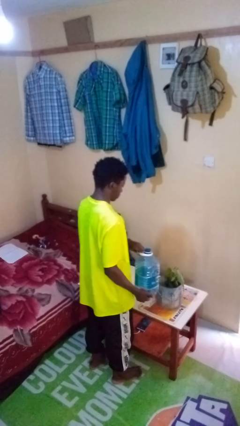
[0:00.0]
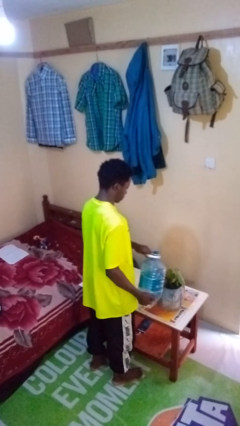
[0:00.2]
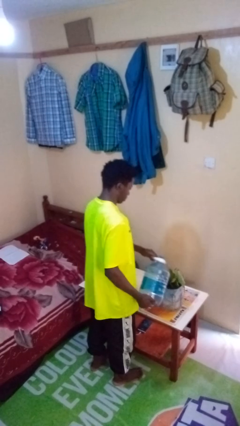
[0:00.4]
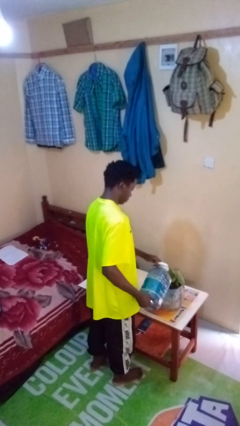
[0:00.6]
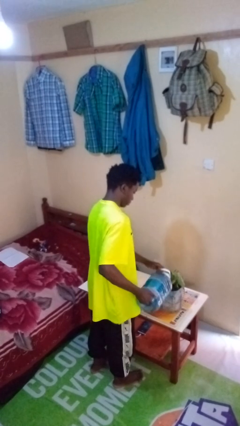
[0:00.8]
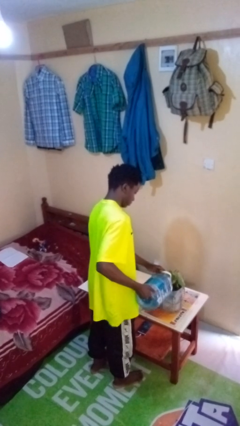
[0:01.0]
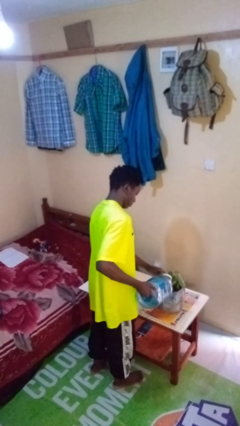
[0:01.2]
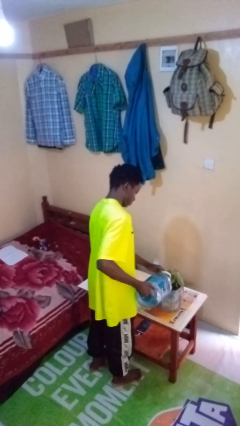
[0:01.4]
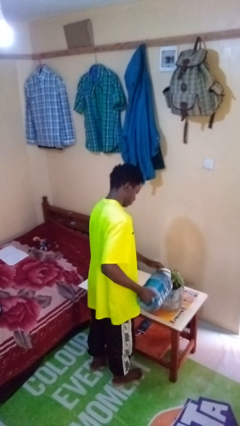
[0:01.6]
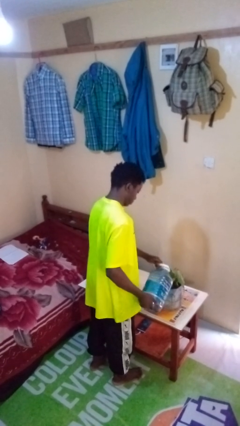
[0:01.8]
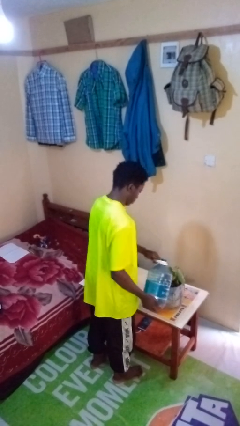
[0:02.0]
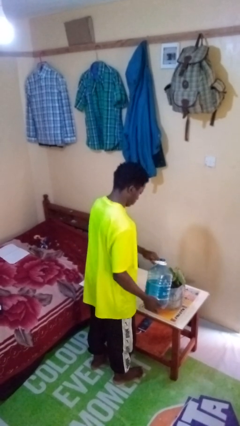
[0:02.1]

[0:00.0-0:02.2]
person waters houseplant

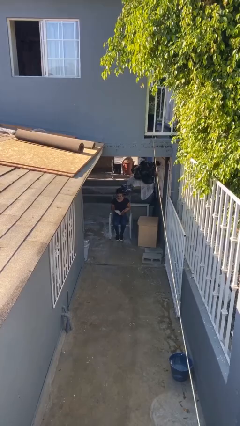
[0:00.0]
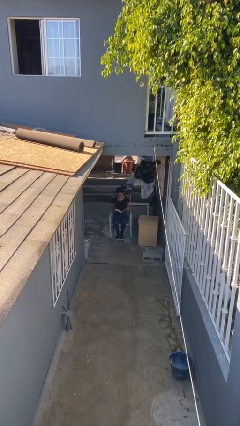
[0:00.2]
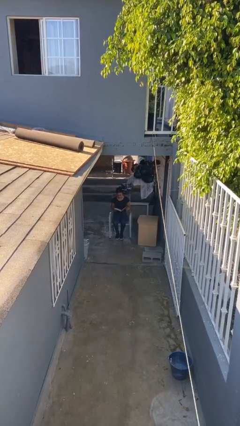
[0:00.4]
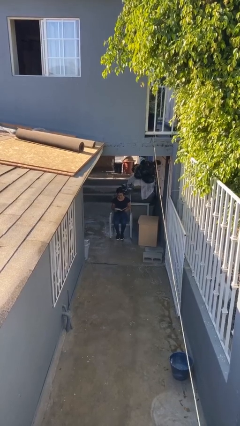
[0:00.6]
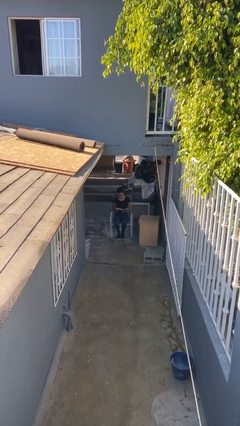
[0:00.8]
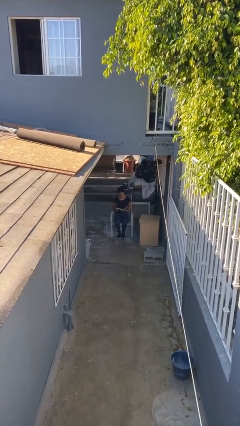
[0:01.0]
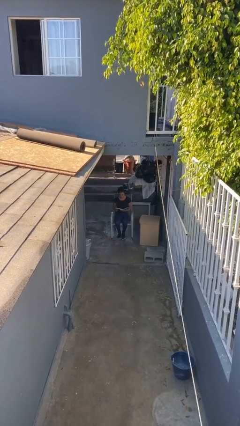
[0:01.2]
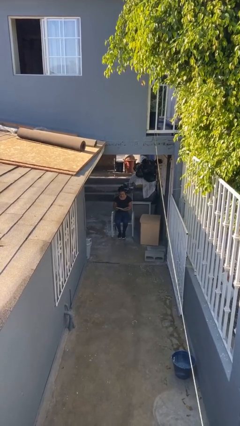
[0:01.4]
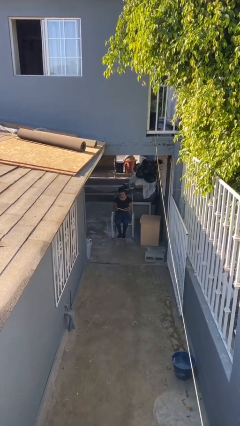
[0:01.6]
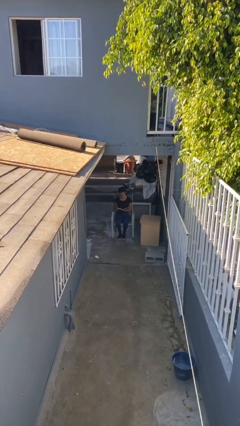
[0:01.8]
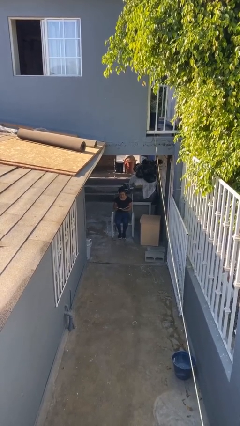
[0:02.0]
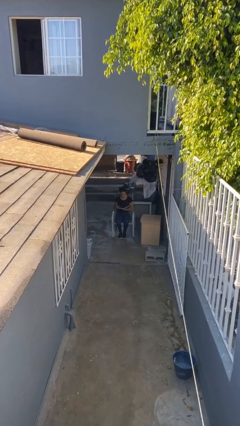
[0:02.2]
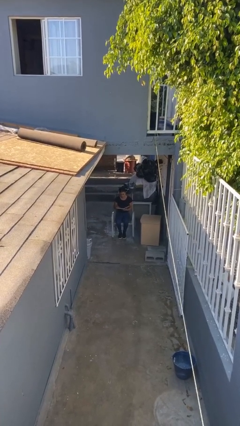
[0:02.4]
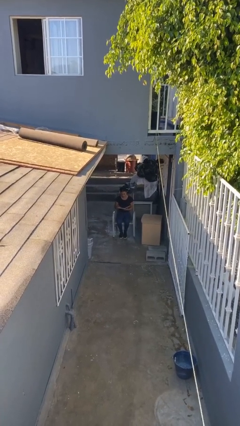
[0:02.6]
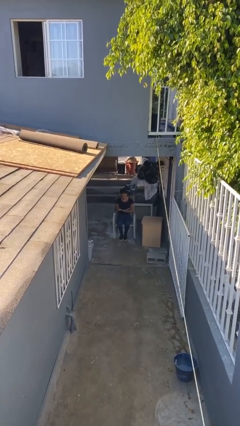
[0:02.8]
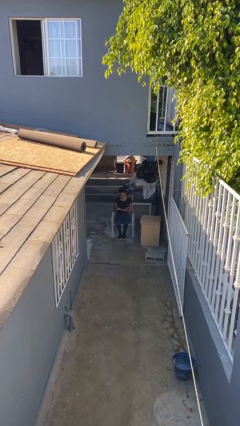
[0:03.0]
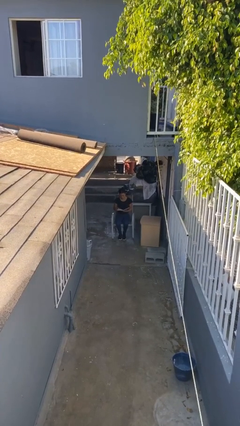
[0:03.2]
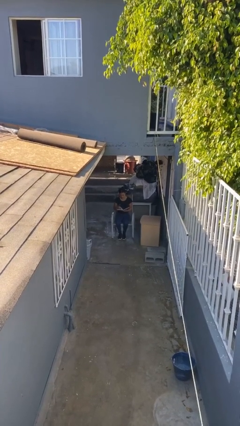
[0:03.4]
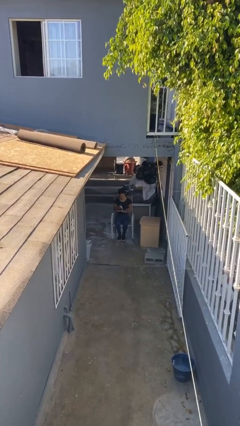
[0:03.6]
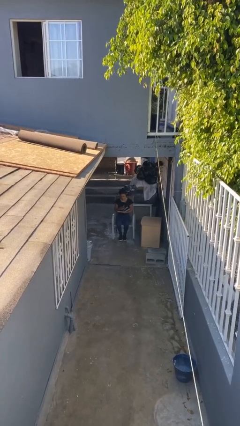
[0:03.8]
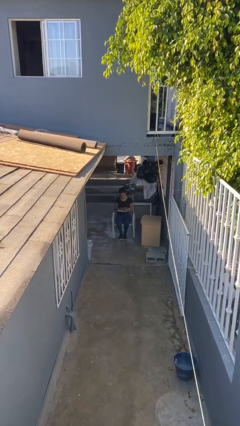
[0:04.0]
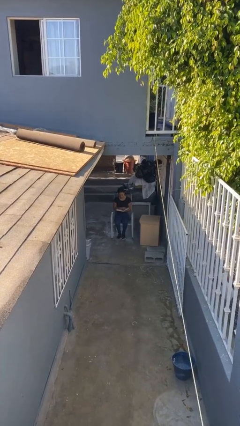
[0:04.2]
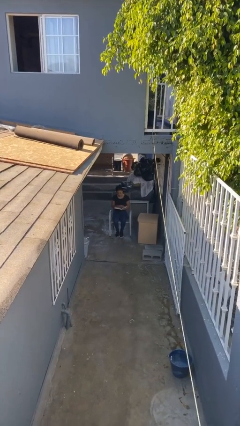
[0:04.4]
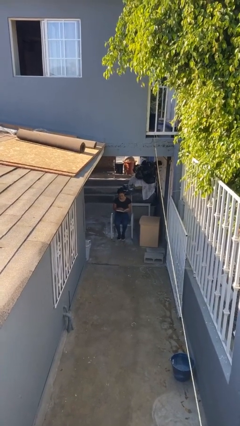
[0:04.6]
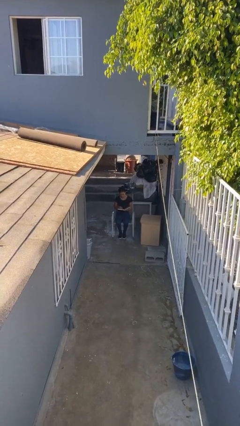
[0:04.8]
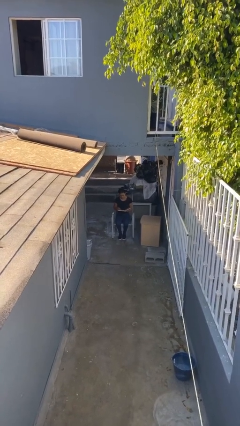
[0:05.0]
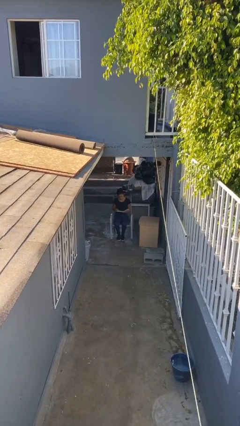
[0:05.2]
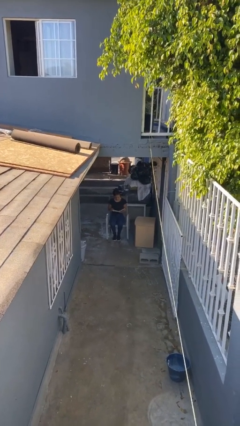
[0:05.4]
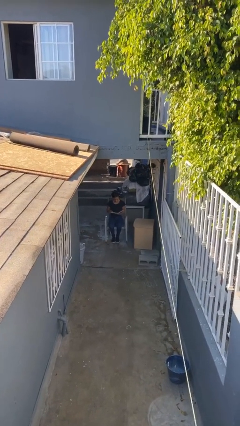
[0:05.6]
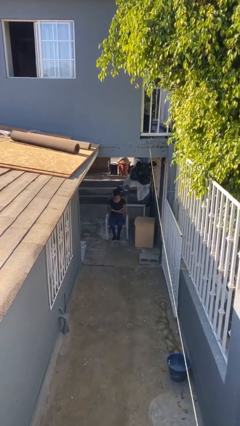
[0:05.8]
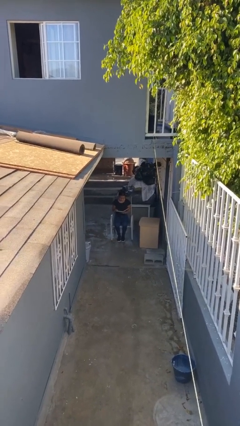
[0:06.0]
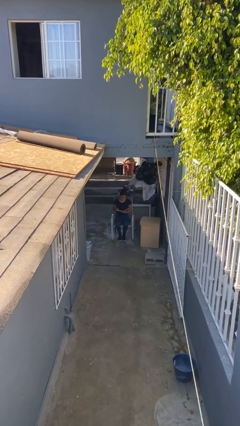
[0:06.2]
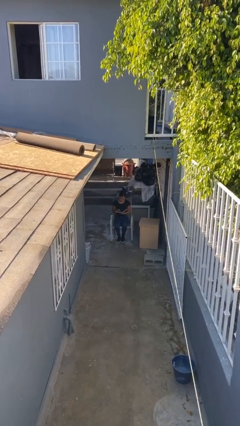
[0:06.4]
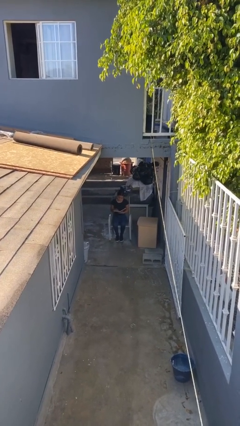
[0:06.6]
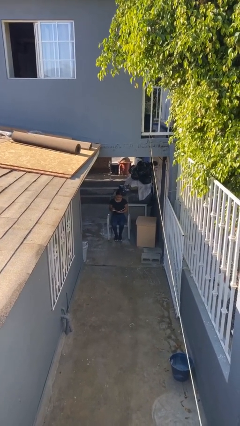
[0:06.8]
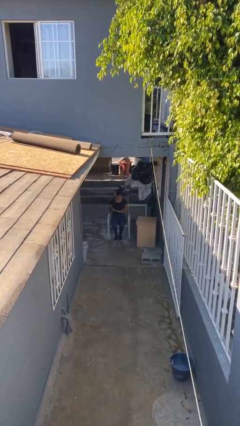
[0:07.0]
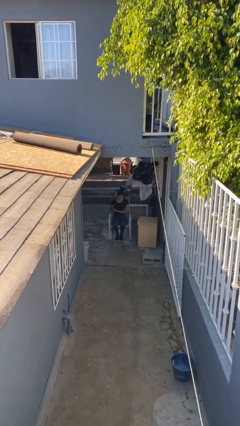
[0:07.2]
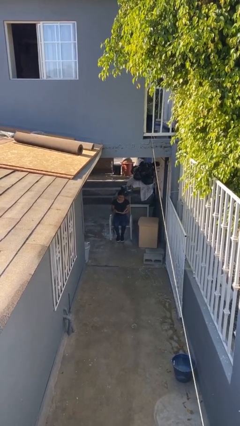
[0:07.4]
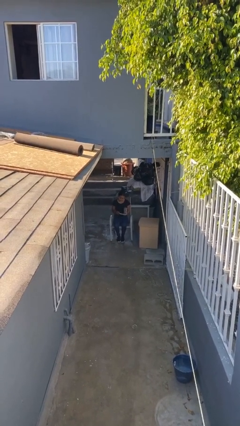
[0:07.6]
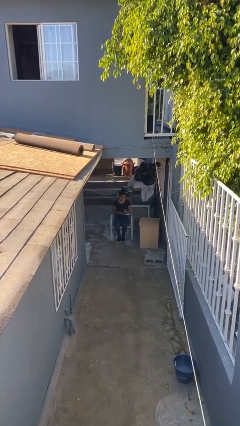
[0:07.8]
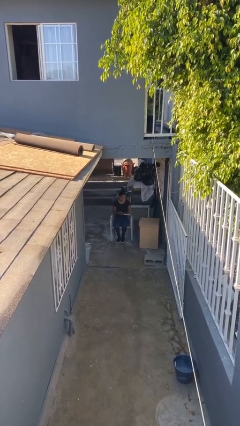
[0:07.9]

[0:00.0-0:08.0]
person reads document

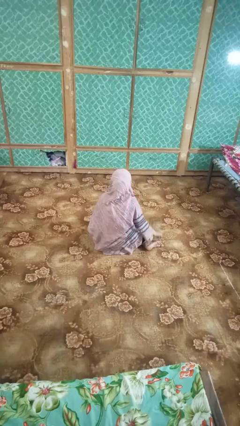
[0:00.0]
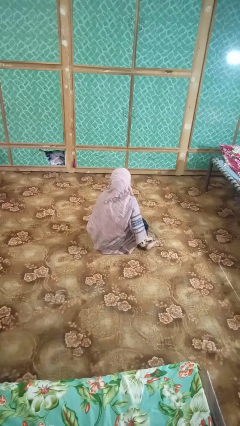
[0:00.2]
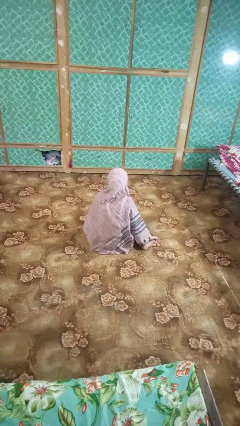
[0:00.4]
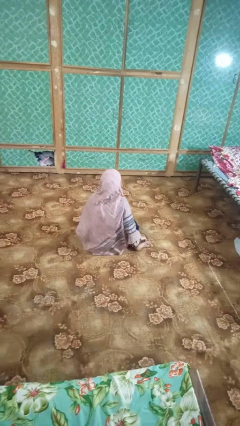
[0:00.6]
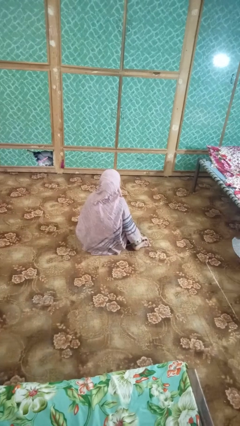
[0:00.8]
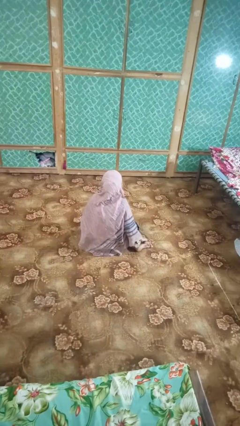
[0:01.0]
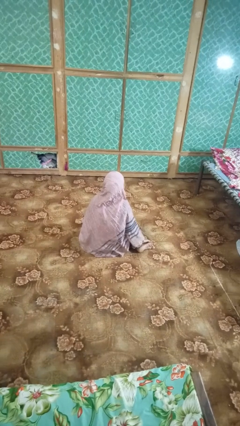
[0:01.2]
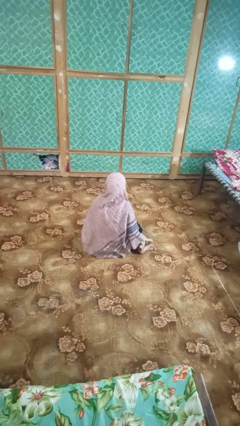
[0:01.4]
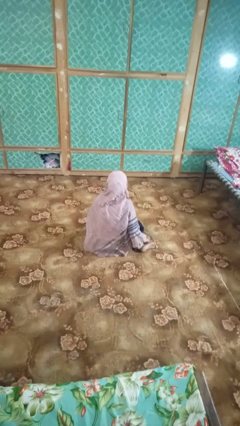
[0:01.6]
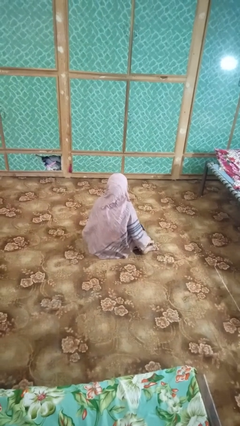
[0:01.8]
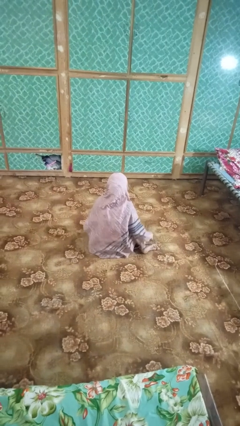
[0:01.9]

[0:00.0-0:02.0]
person rubs foot

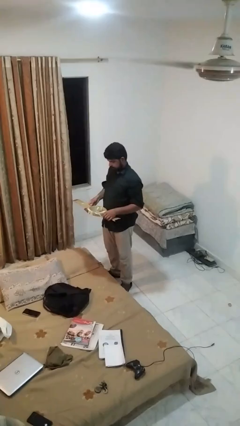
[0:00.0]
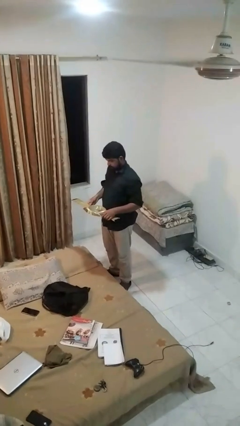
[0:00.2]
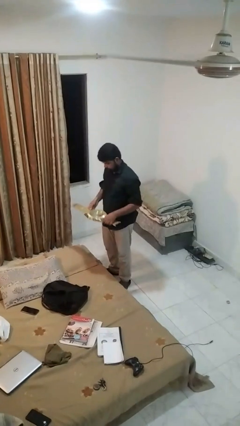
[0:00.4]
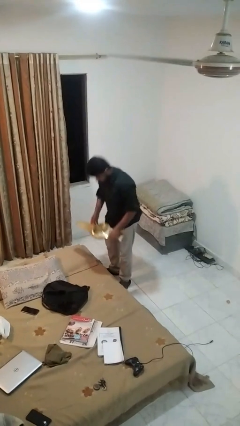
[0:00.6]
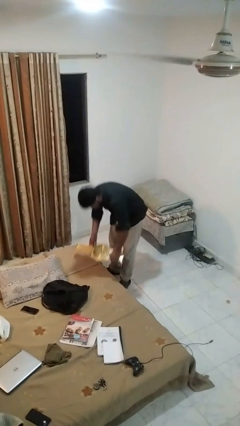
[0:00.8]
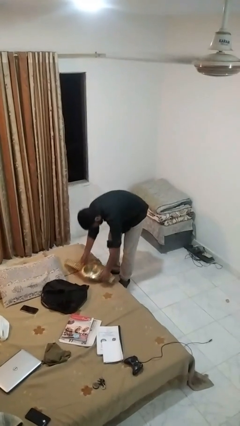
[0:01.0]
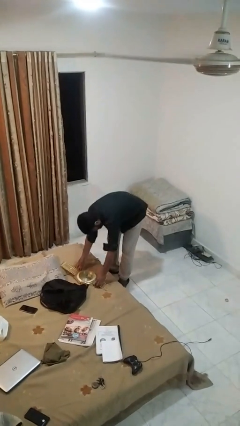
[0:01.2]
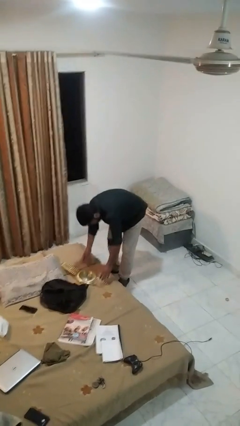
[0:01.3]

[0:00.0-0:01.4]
person puts down object on bed

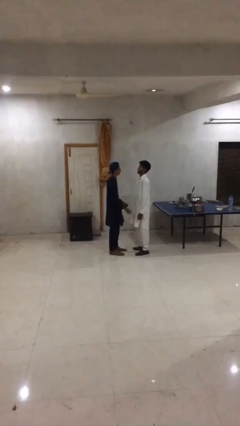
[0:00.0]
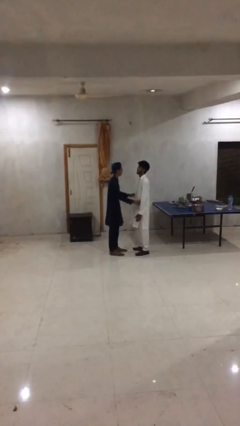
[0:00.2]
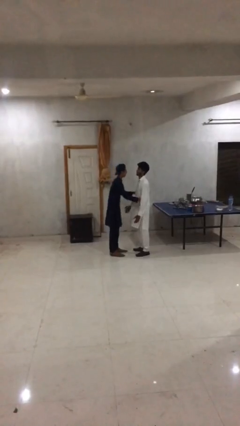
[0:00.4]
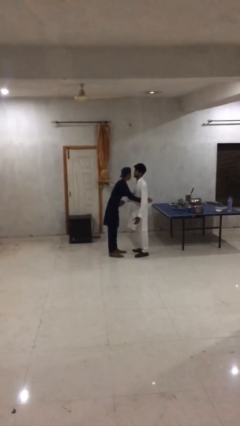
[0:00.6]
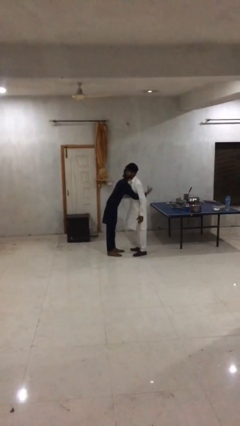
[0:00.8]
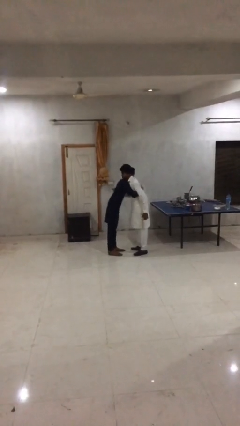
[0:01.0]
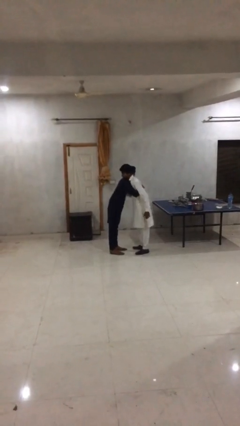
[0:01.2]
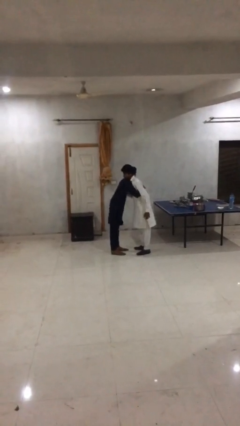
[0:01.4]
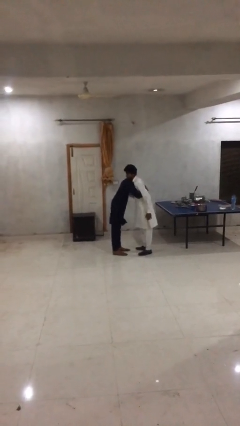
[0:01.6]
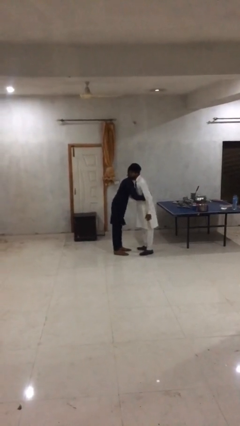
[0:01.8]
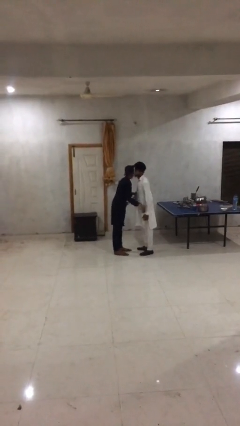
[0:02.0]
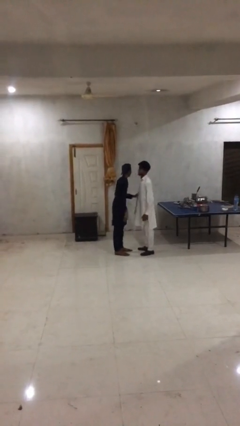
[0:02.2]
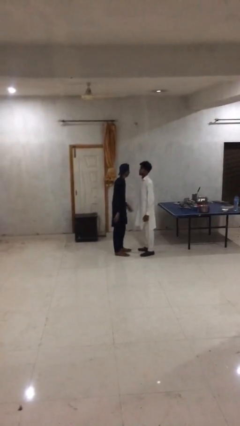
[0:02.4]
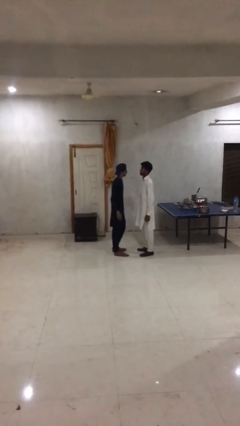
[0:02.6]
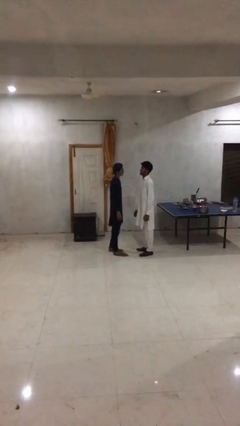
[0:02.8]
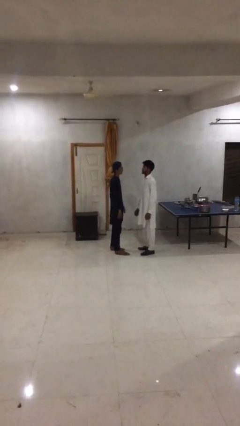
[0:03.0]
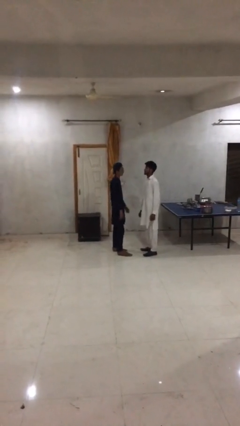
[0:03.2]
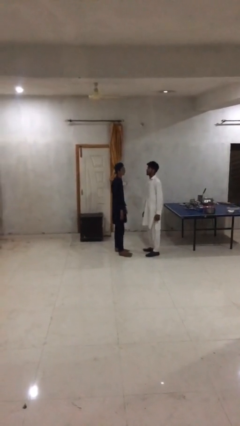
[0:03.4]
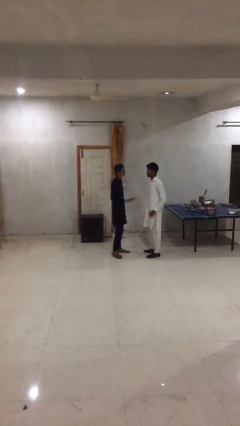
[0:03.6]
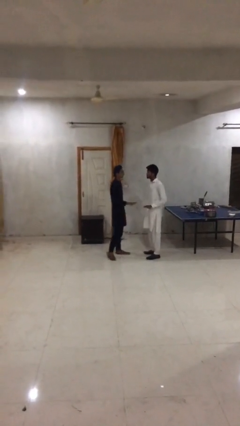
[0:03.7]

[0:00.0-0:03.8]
person embraces person
